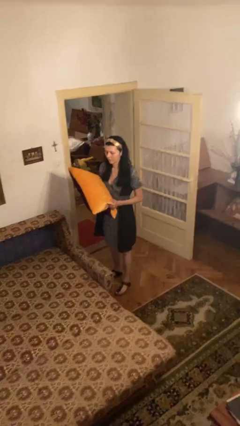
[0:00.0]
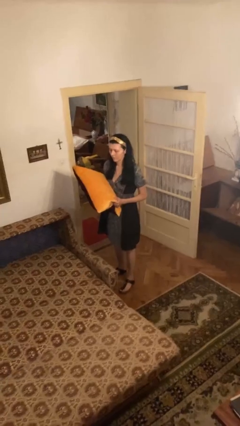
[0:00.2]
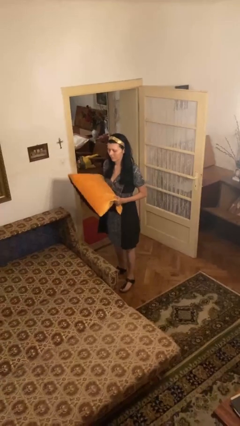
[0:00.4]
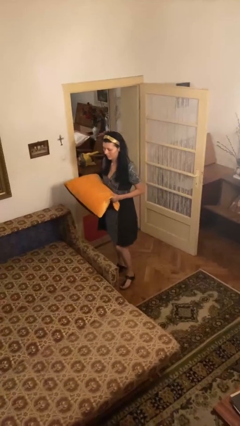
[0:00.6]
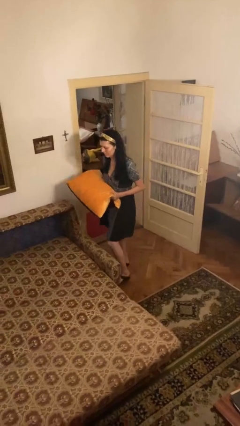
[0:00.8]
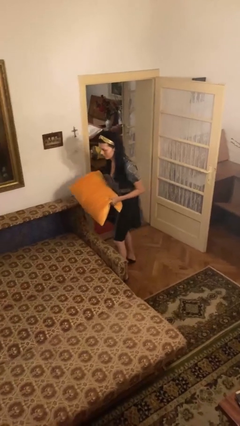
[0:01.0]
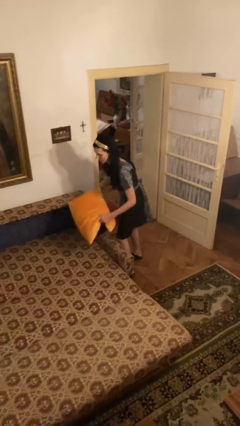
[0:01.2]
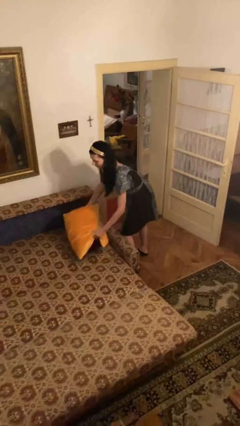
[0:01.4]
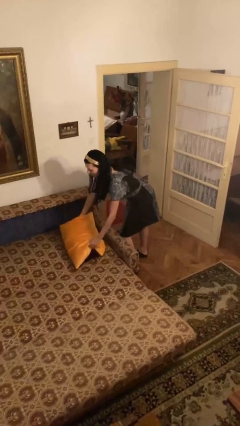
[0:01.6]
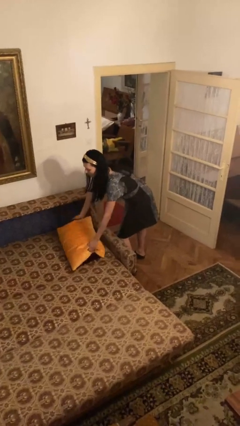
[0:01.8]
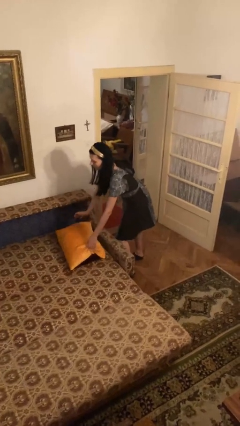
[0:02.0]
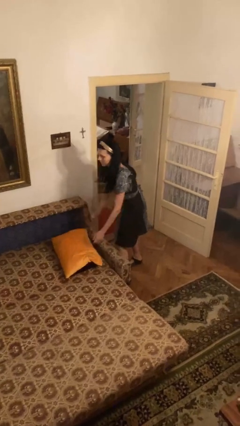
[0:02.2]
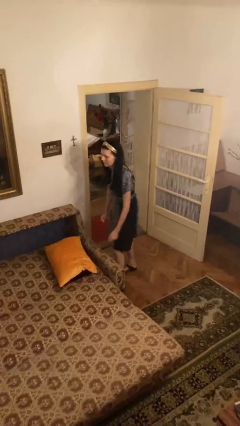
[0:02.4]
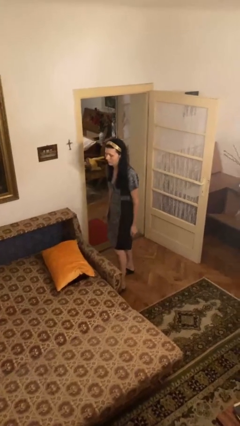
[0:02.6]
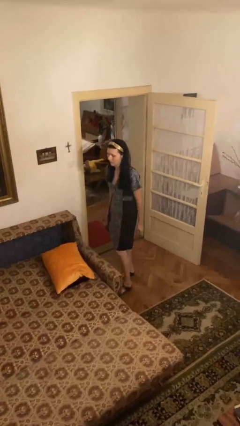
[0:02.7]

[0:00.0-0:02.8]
person puts down object on bed

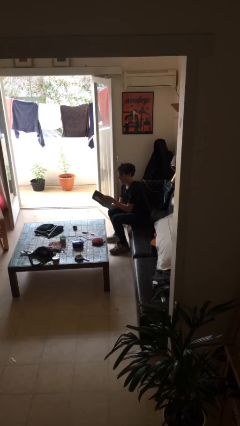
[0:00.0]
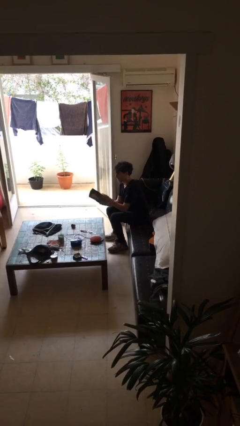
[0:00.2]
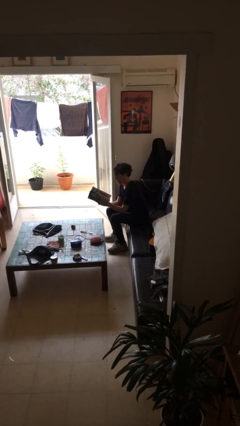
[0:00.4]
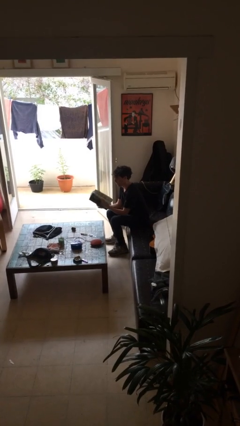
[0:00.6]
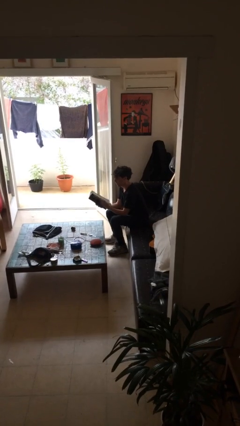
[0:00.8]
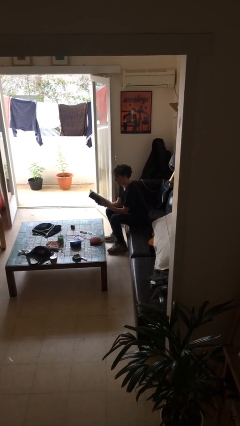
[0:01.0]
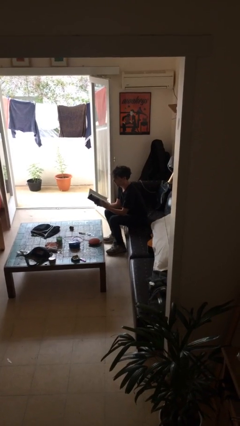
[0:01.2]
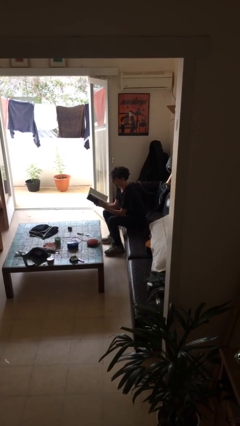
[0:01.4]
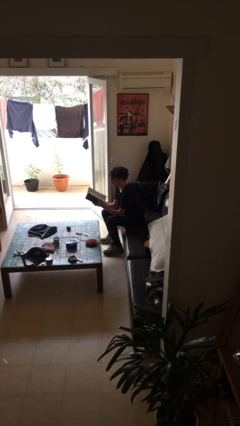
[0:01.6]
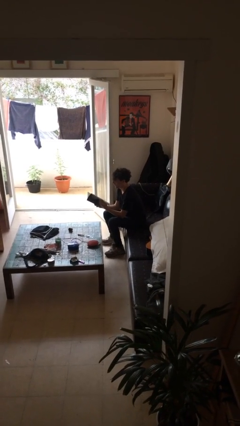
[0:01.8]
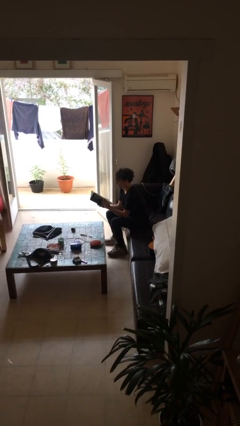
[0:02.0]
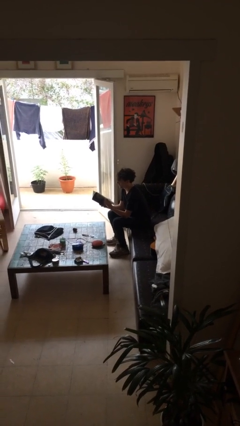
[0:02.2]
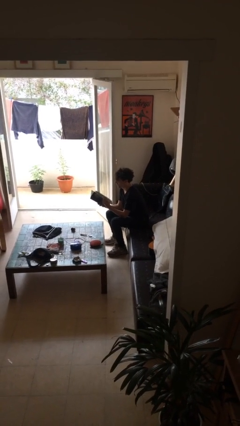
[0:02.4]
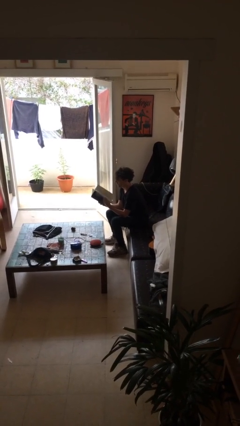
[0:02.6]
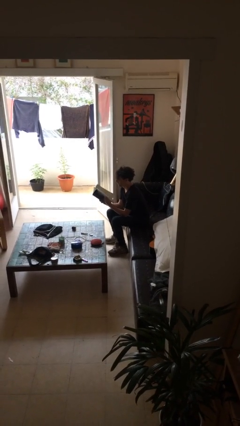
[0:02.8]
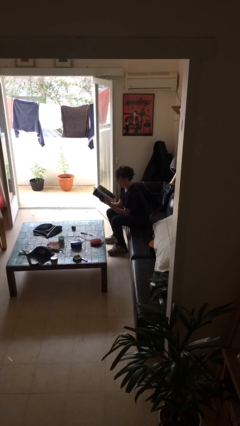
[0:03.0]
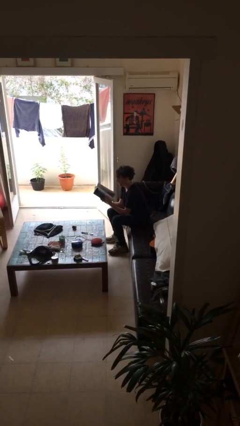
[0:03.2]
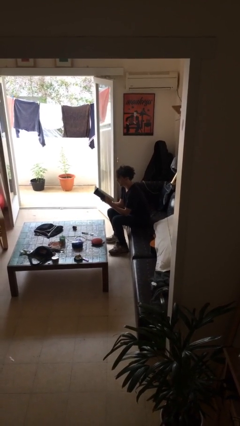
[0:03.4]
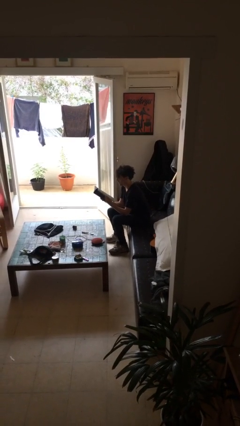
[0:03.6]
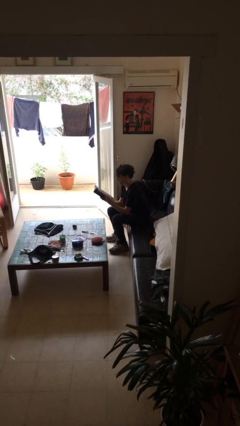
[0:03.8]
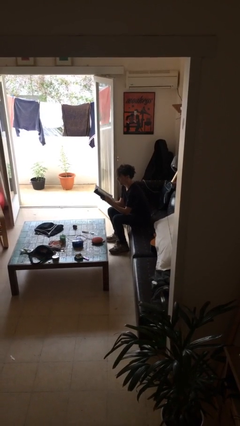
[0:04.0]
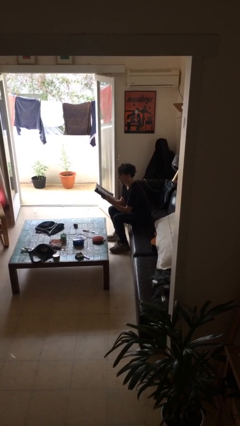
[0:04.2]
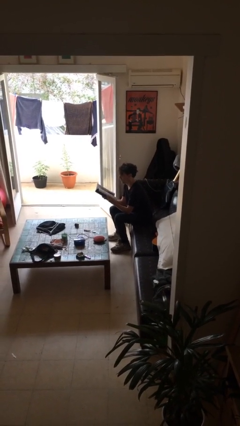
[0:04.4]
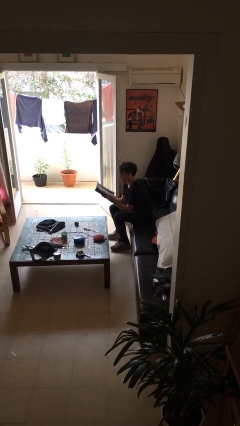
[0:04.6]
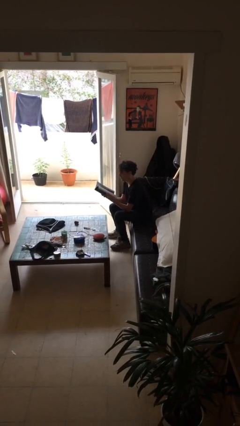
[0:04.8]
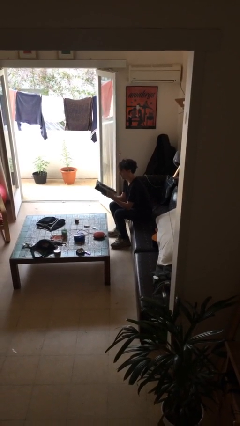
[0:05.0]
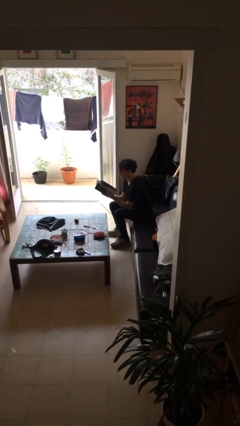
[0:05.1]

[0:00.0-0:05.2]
person reads document

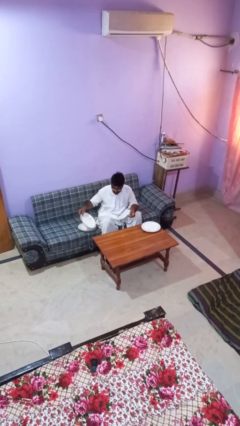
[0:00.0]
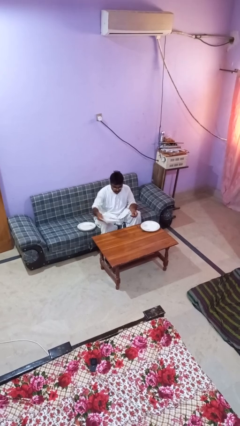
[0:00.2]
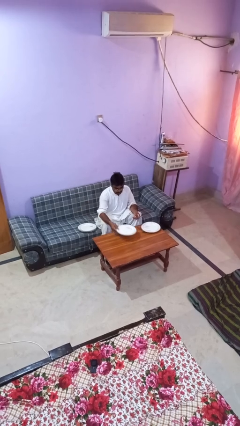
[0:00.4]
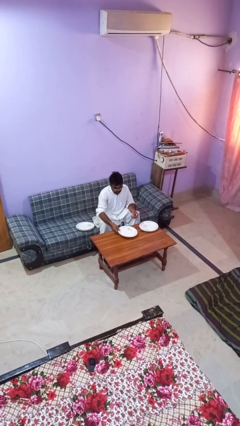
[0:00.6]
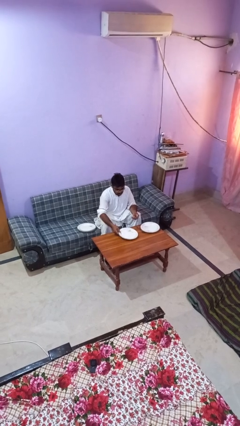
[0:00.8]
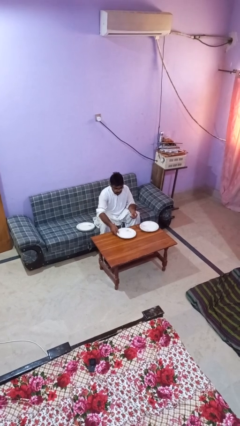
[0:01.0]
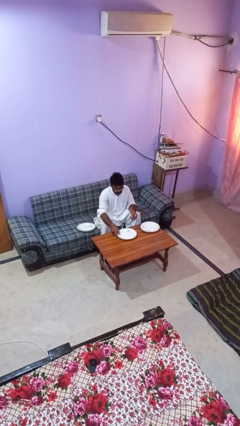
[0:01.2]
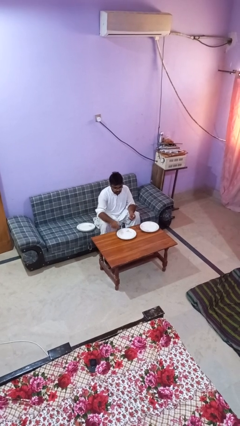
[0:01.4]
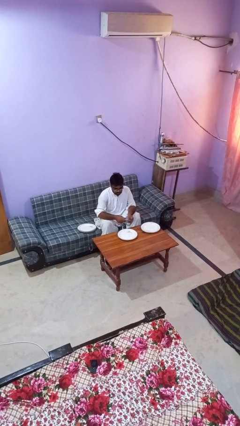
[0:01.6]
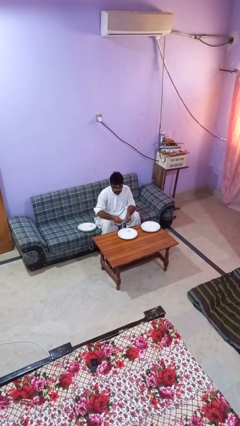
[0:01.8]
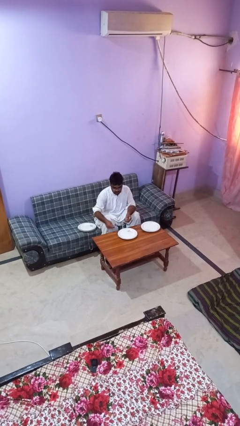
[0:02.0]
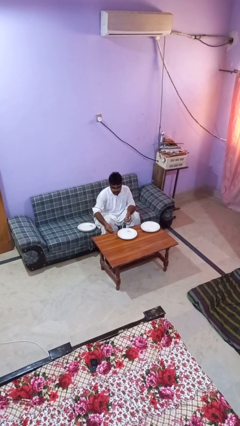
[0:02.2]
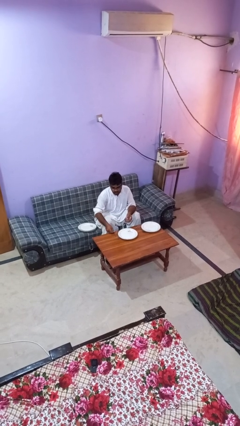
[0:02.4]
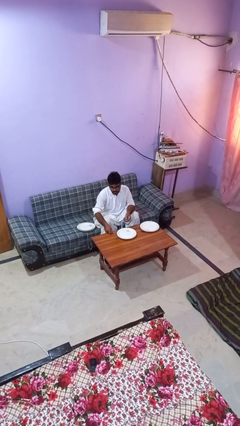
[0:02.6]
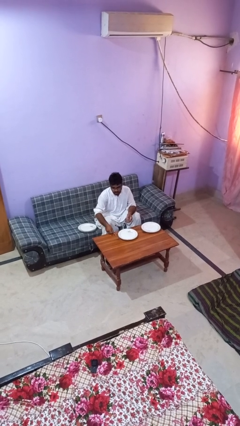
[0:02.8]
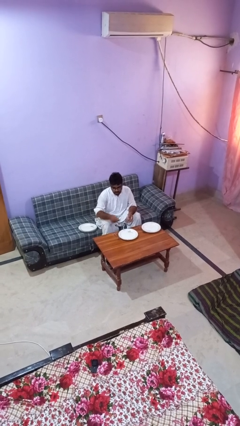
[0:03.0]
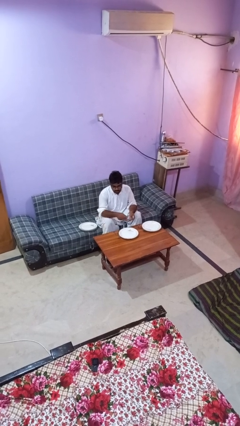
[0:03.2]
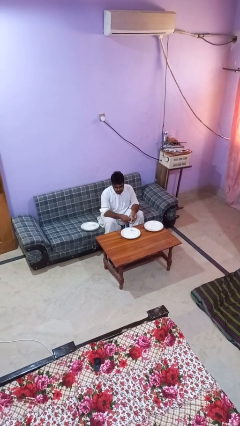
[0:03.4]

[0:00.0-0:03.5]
person sets table

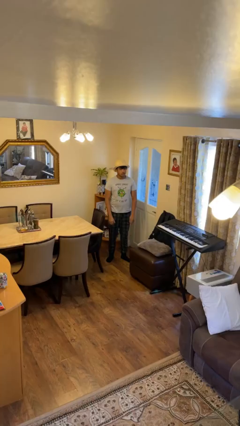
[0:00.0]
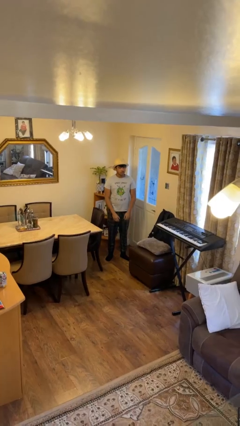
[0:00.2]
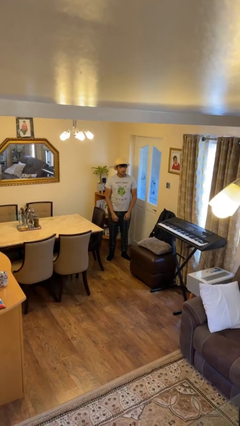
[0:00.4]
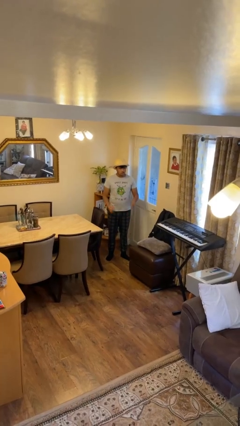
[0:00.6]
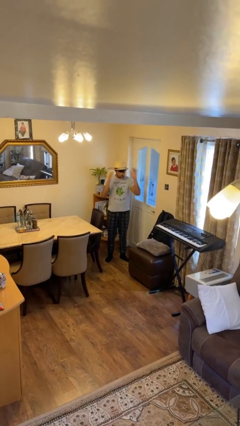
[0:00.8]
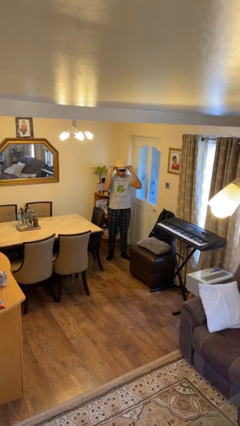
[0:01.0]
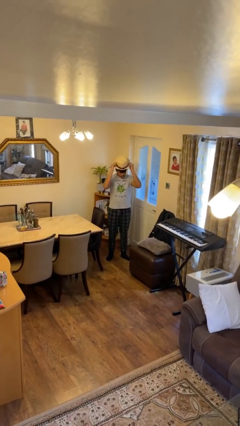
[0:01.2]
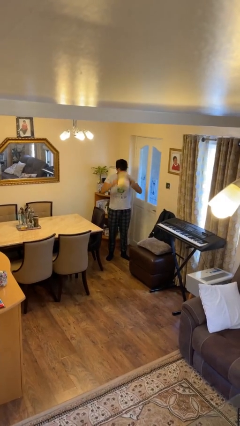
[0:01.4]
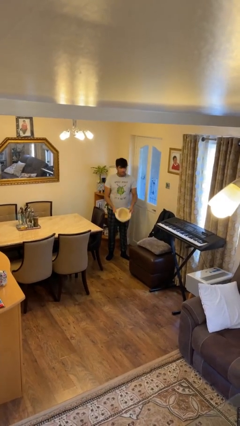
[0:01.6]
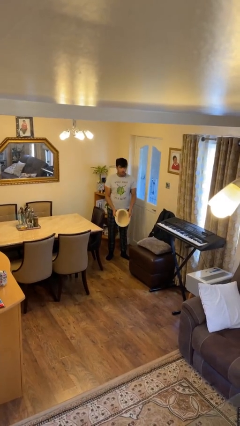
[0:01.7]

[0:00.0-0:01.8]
person takes off hat

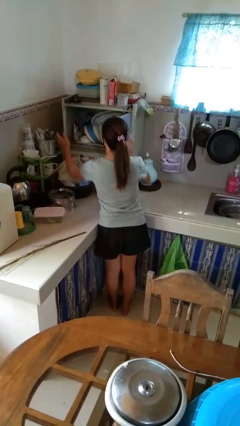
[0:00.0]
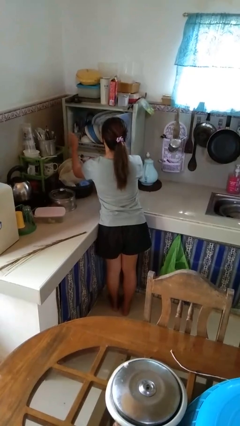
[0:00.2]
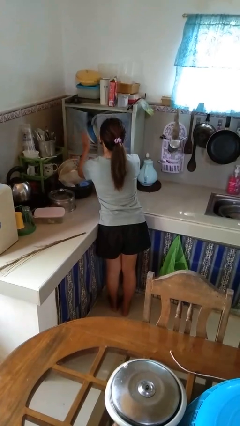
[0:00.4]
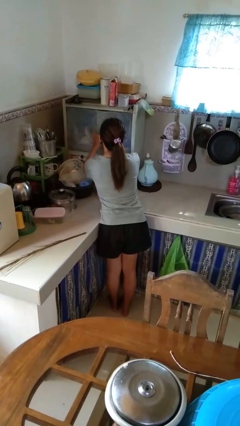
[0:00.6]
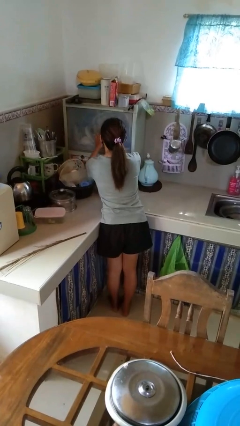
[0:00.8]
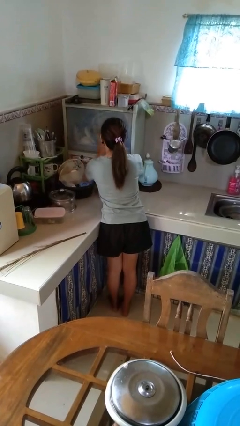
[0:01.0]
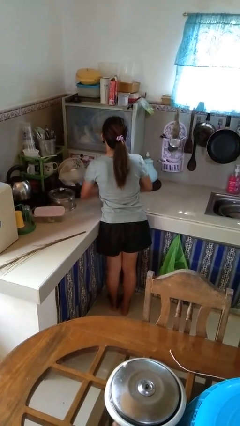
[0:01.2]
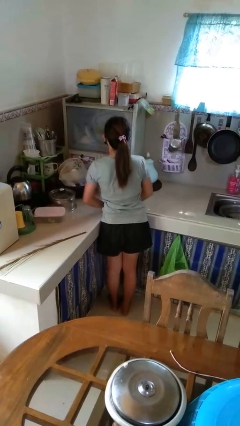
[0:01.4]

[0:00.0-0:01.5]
person closes kitchen drawer

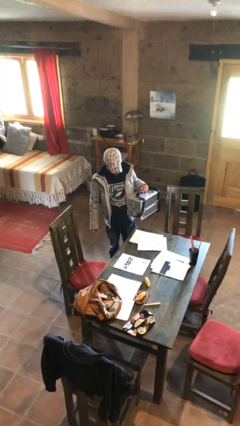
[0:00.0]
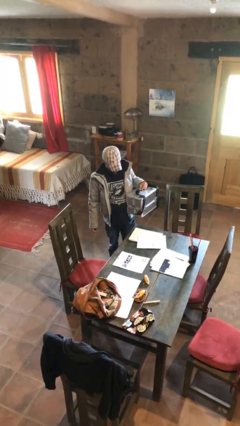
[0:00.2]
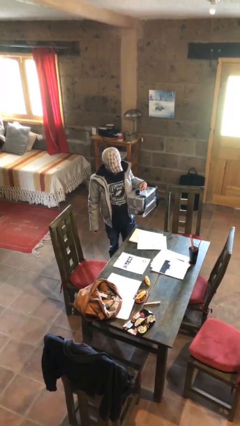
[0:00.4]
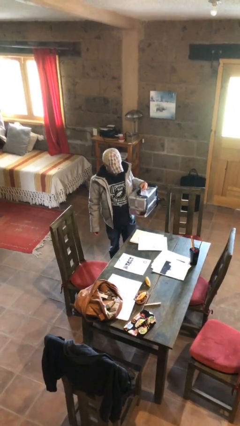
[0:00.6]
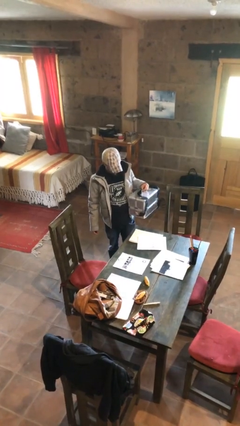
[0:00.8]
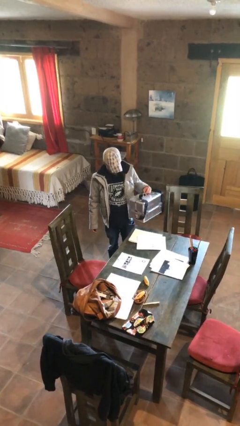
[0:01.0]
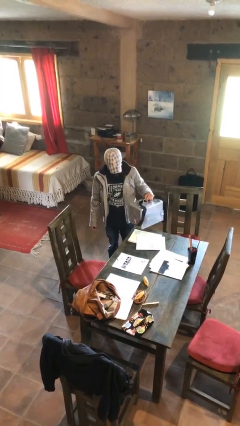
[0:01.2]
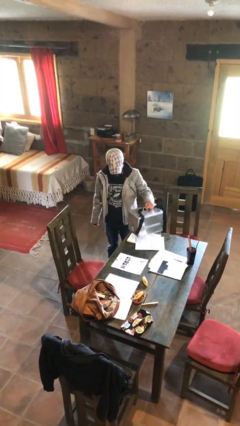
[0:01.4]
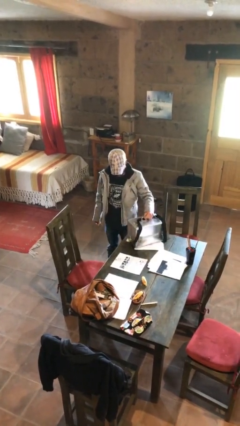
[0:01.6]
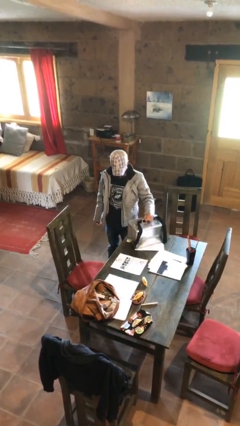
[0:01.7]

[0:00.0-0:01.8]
person puts down object on table

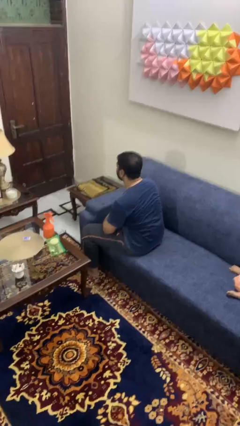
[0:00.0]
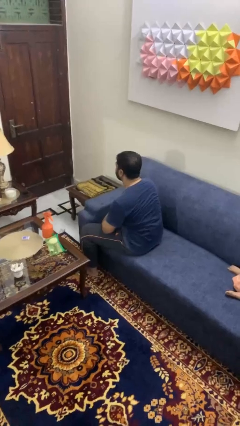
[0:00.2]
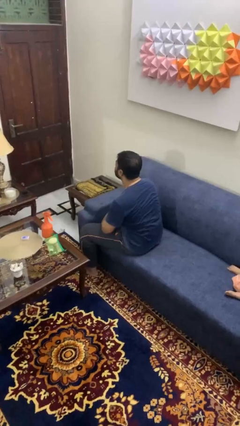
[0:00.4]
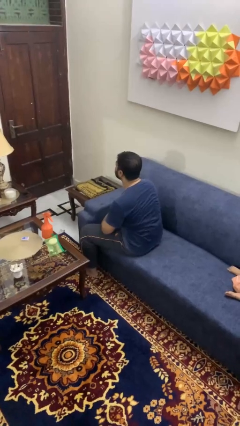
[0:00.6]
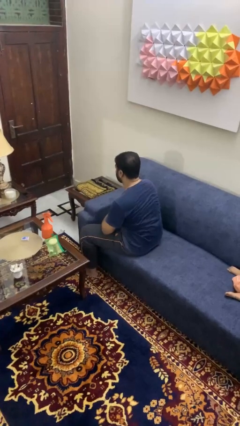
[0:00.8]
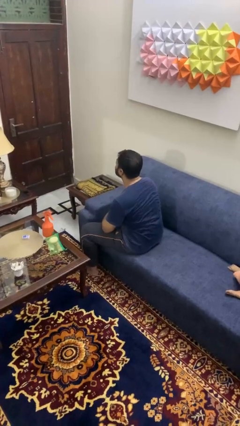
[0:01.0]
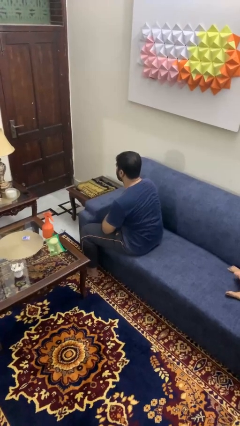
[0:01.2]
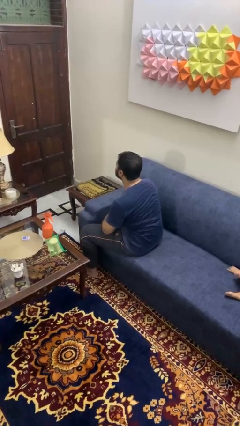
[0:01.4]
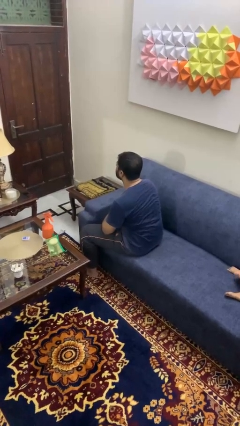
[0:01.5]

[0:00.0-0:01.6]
person nods head
